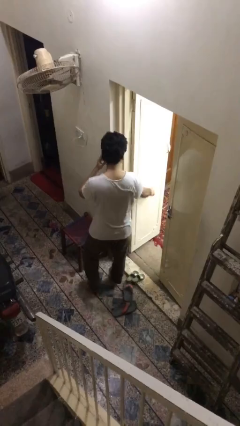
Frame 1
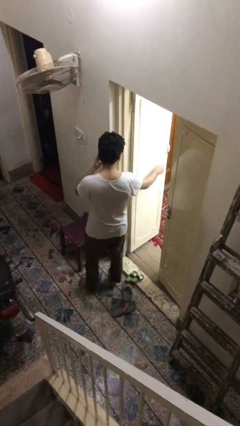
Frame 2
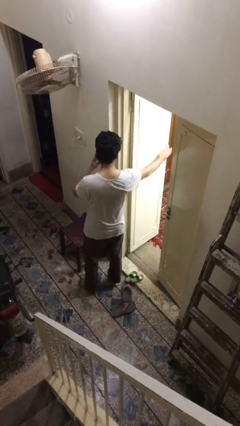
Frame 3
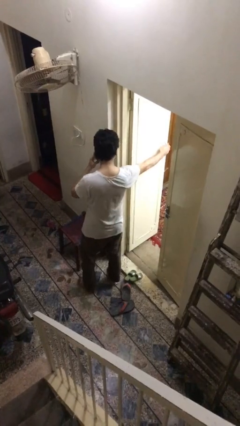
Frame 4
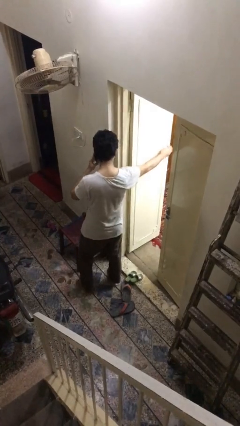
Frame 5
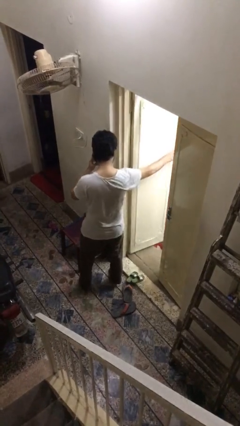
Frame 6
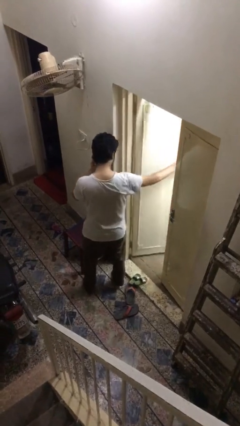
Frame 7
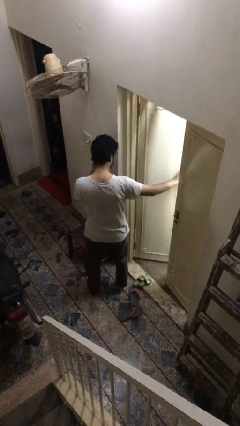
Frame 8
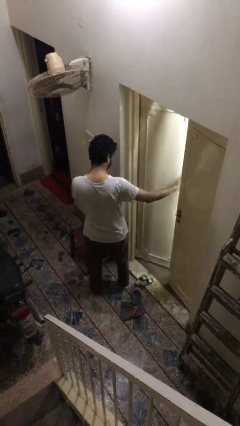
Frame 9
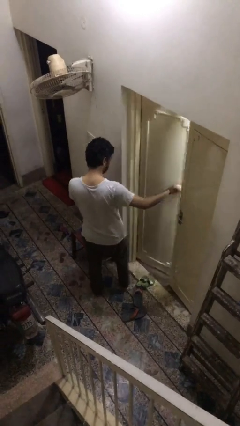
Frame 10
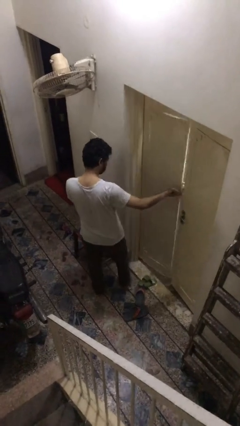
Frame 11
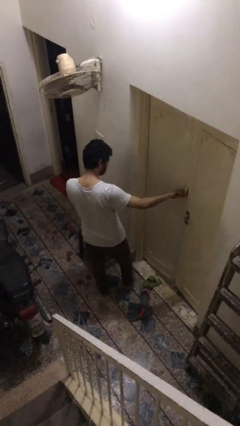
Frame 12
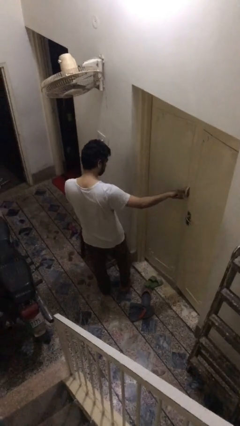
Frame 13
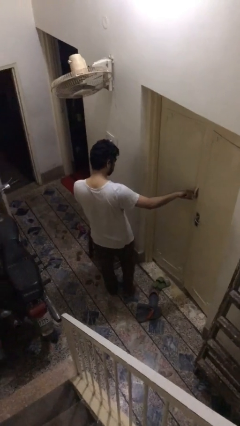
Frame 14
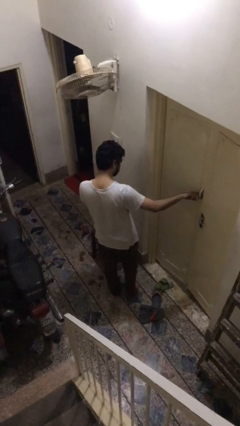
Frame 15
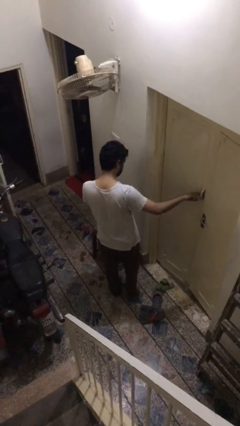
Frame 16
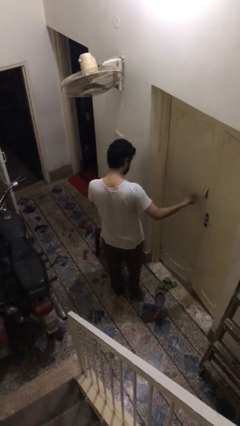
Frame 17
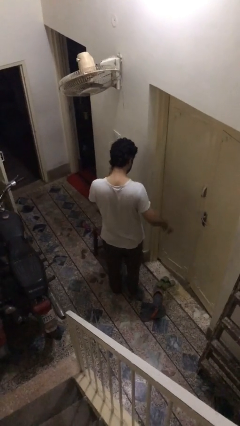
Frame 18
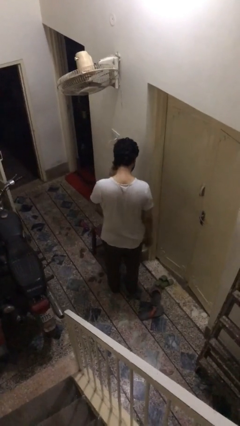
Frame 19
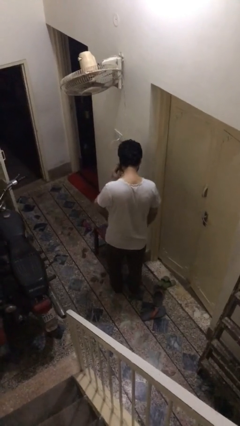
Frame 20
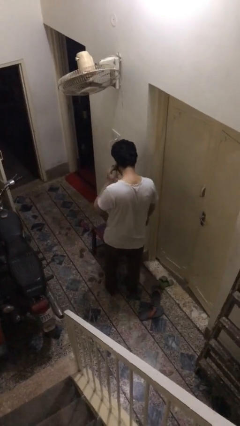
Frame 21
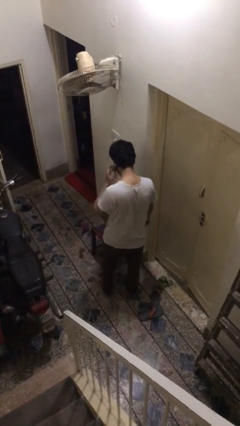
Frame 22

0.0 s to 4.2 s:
person closes facility door

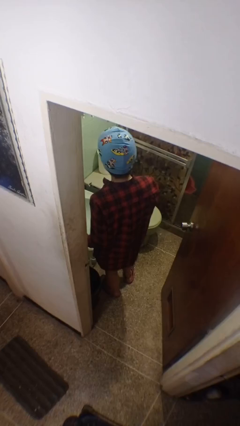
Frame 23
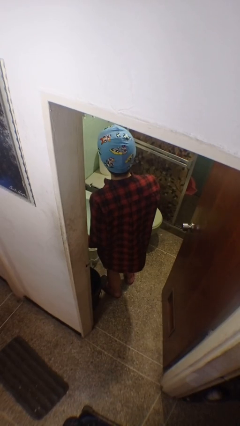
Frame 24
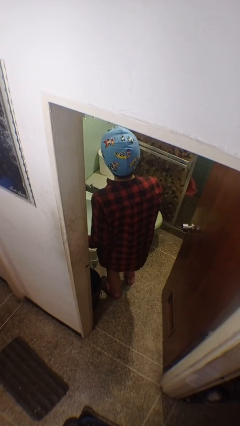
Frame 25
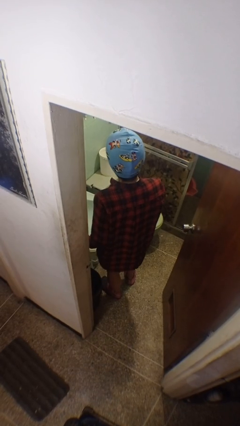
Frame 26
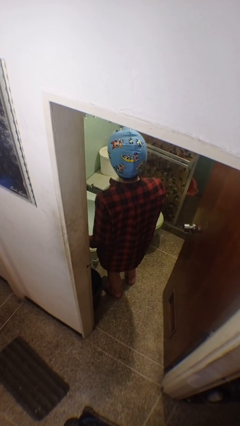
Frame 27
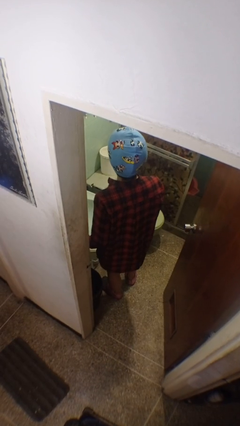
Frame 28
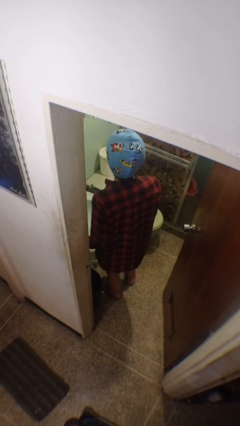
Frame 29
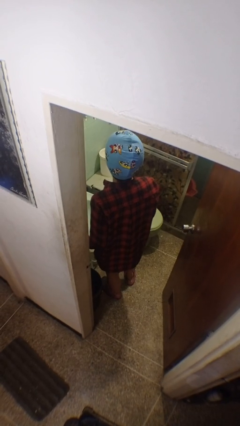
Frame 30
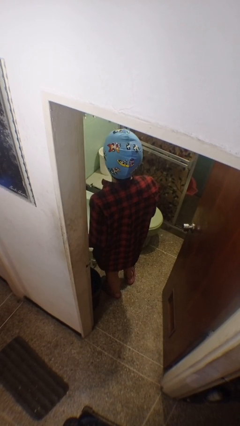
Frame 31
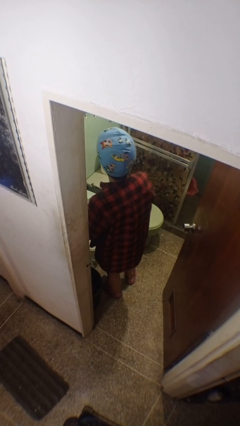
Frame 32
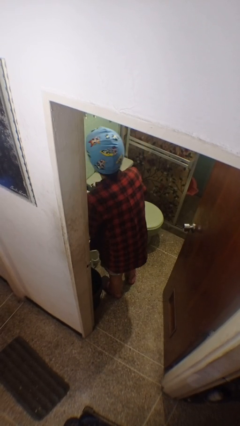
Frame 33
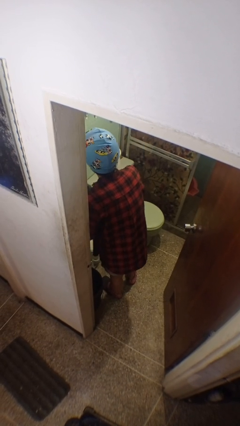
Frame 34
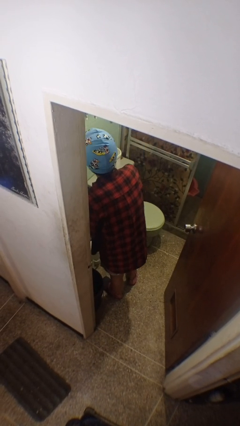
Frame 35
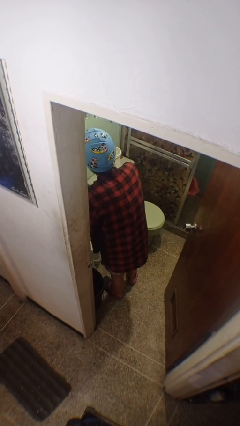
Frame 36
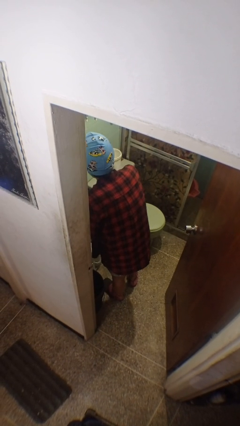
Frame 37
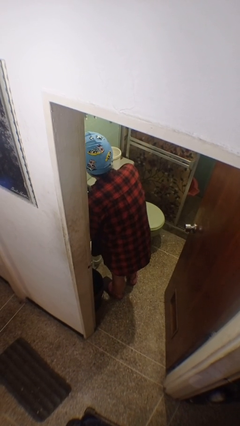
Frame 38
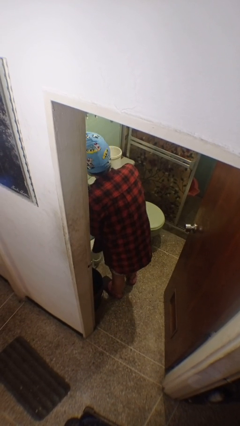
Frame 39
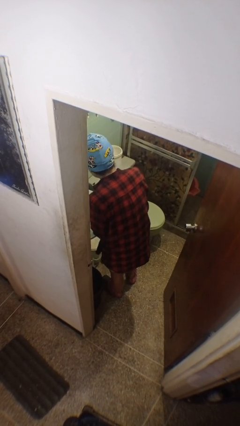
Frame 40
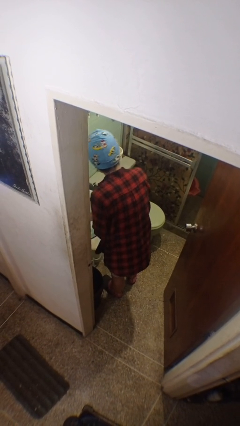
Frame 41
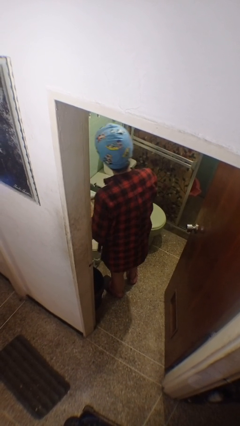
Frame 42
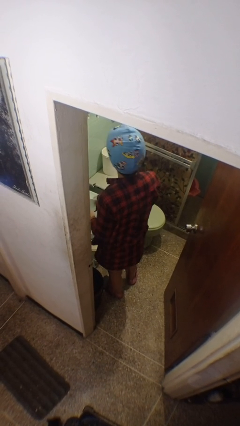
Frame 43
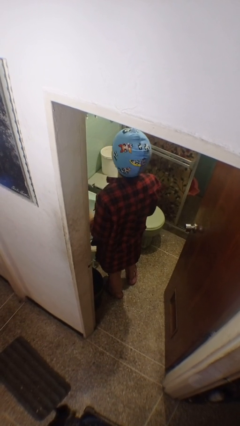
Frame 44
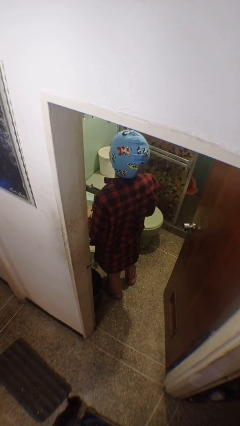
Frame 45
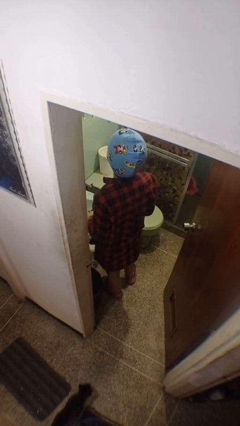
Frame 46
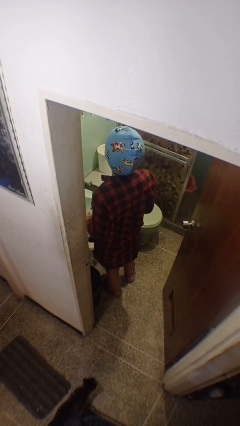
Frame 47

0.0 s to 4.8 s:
person washes hands

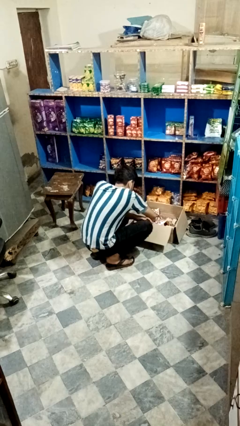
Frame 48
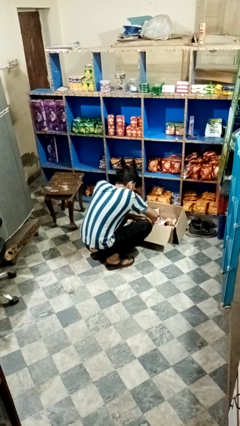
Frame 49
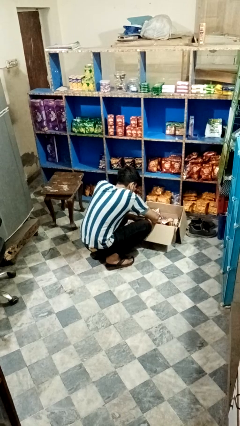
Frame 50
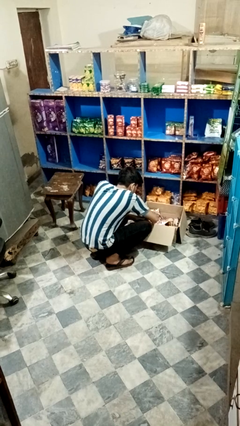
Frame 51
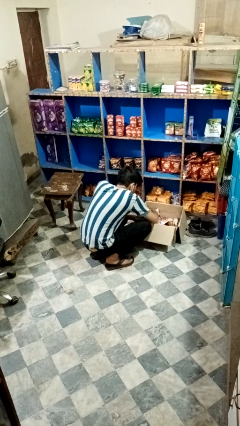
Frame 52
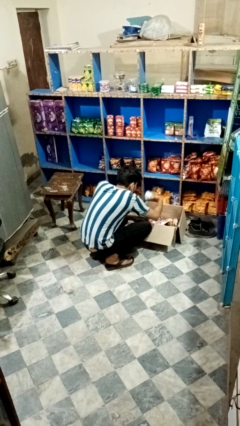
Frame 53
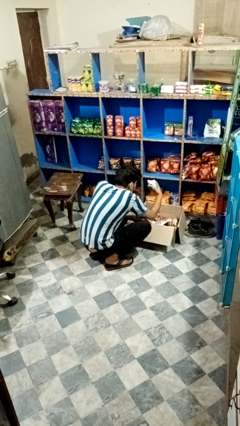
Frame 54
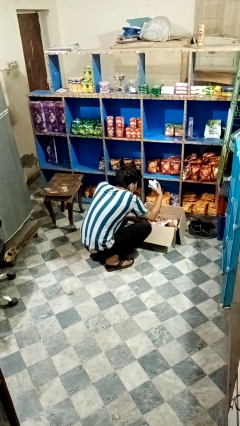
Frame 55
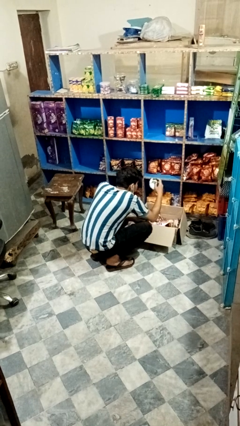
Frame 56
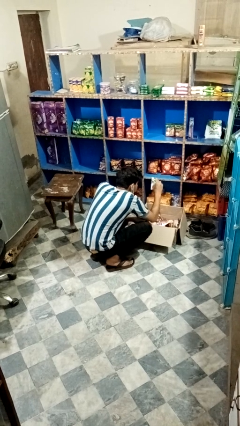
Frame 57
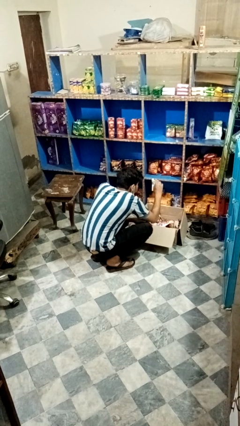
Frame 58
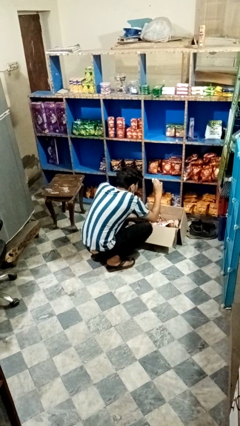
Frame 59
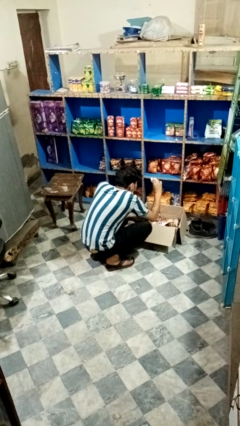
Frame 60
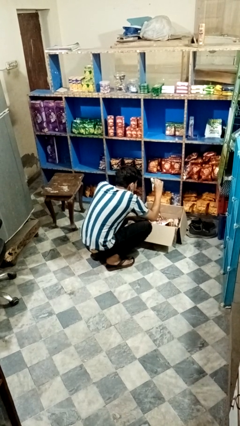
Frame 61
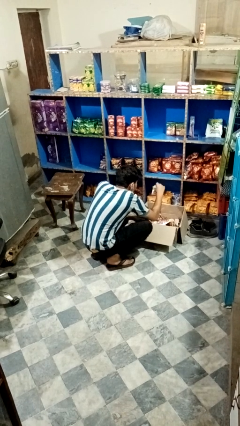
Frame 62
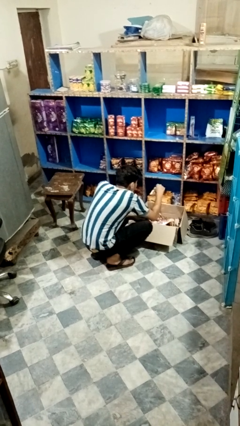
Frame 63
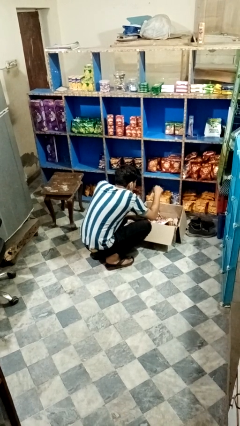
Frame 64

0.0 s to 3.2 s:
person searches in box

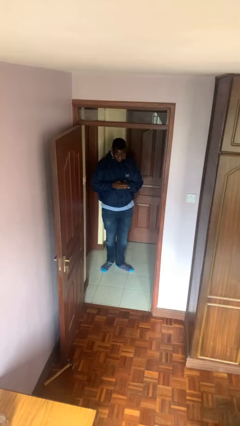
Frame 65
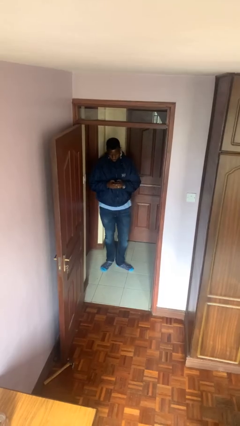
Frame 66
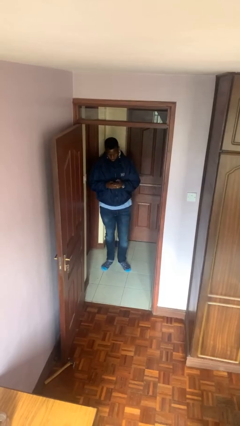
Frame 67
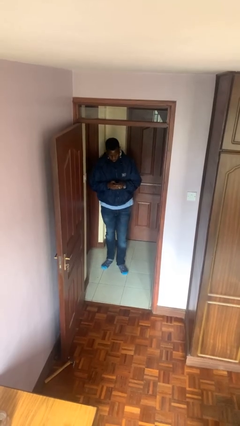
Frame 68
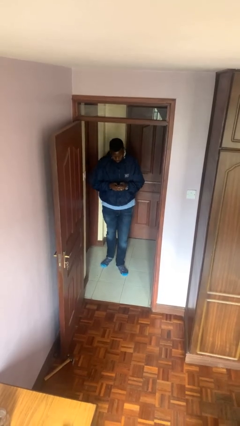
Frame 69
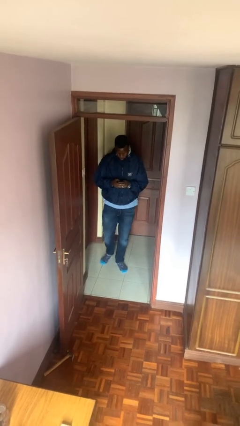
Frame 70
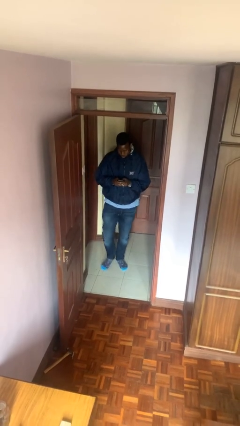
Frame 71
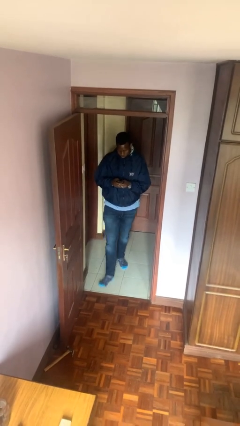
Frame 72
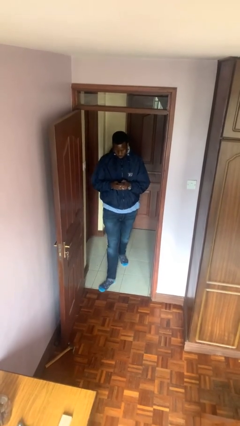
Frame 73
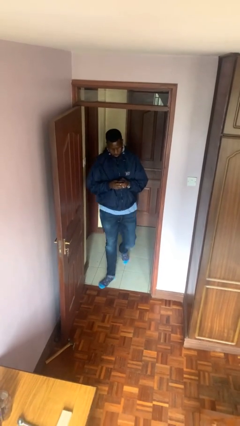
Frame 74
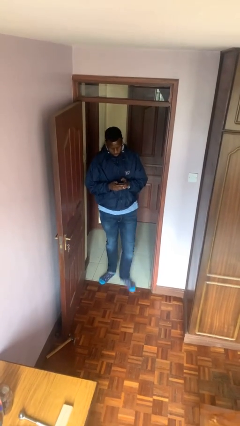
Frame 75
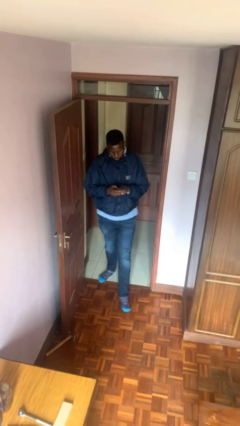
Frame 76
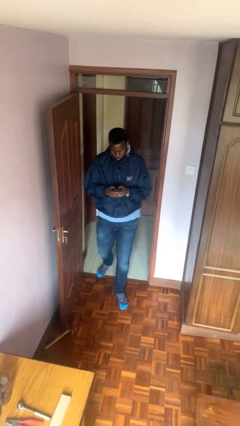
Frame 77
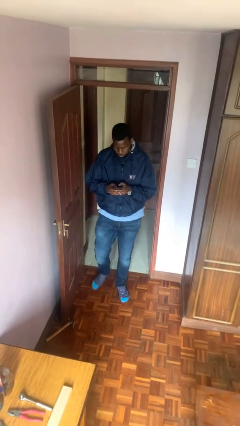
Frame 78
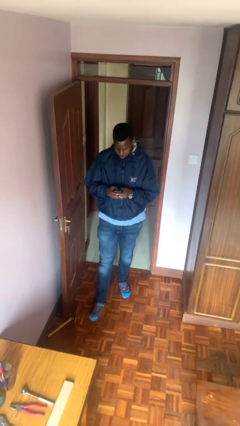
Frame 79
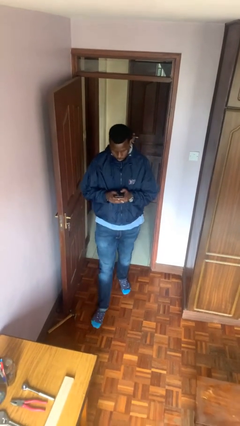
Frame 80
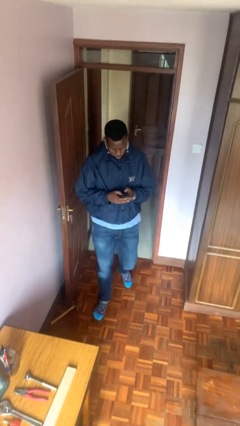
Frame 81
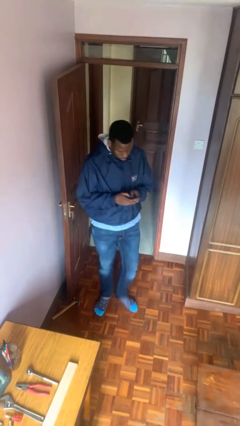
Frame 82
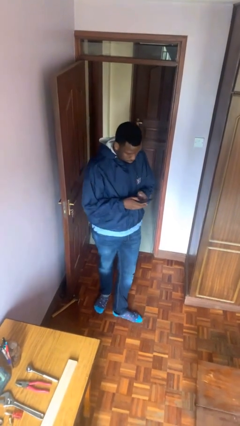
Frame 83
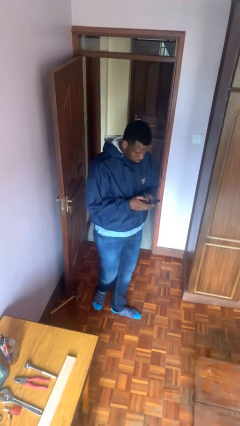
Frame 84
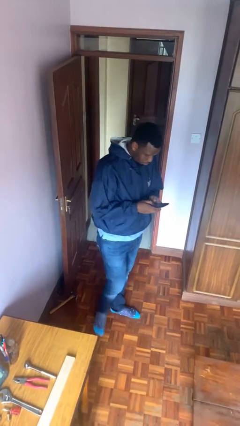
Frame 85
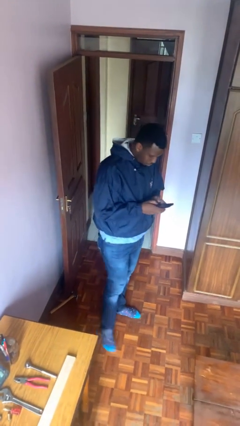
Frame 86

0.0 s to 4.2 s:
person enters scene through structure

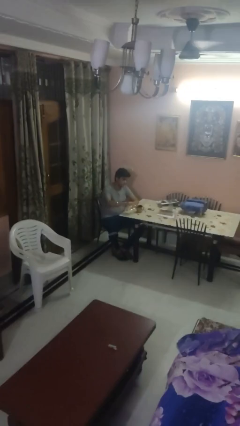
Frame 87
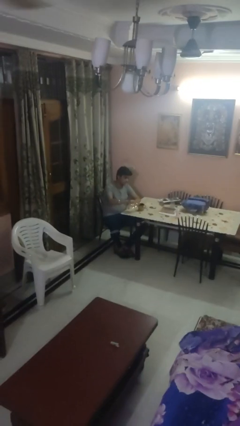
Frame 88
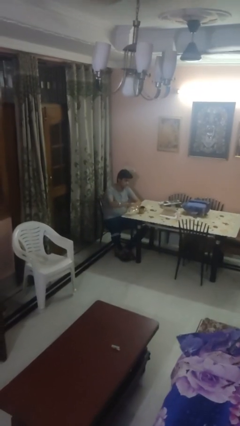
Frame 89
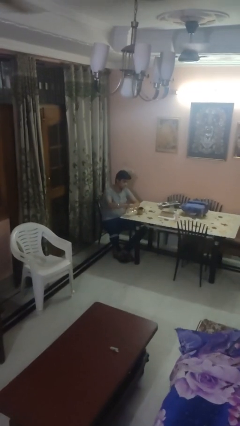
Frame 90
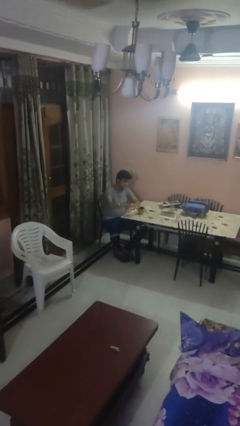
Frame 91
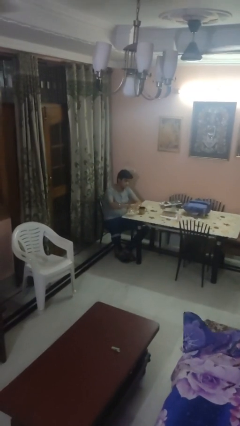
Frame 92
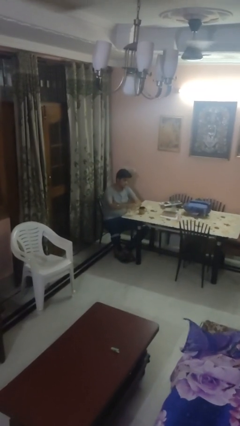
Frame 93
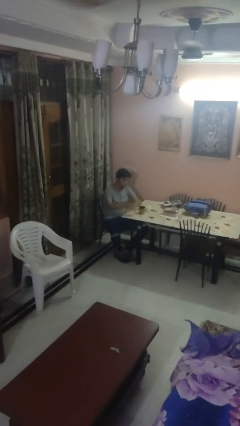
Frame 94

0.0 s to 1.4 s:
person pours liquid into cup
